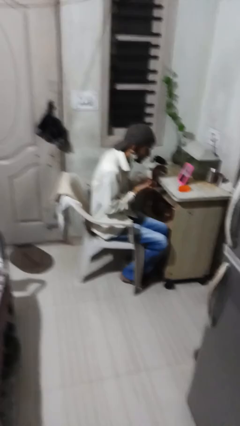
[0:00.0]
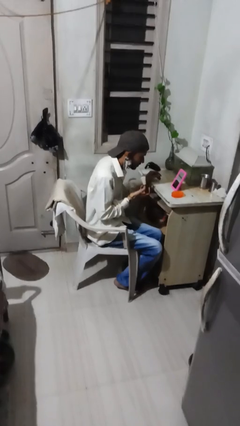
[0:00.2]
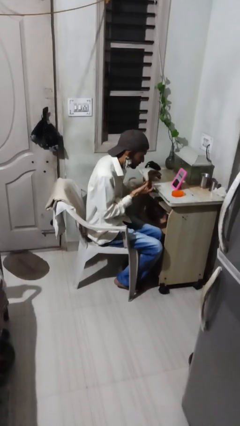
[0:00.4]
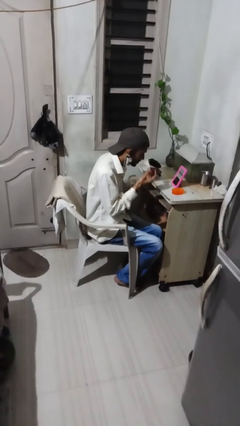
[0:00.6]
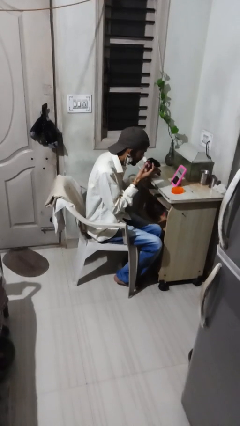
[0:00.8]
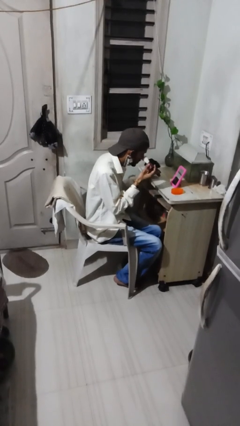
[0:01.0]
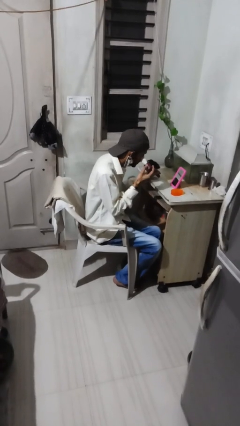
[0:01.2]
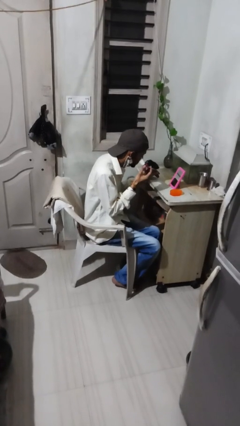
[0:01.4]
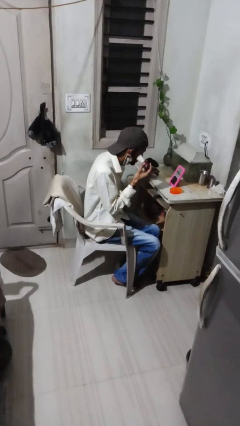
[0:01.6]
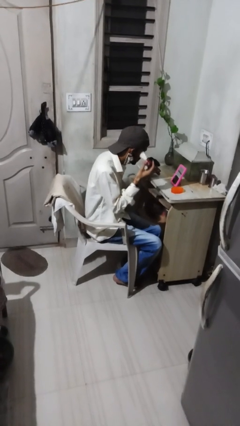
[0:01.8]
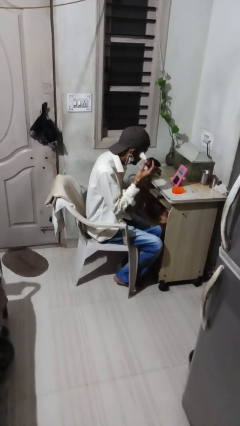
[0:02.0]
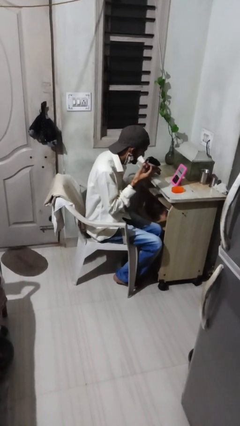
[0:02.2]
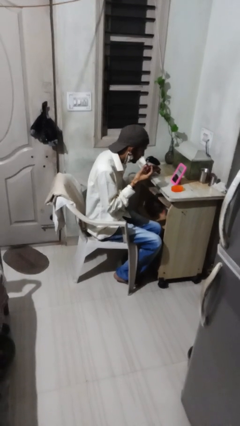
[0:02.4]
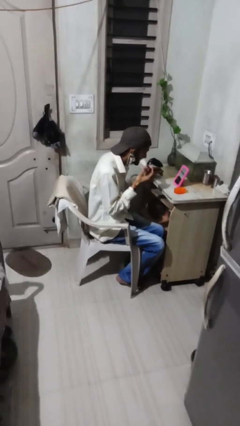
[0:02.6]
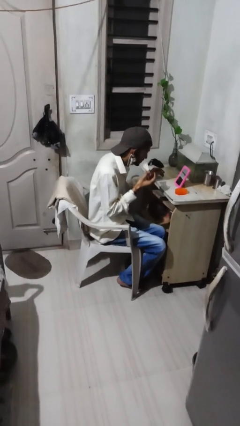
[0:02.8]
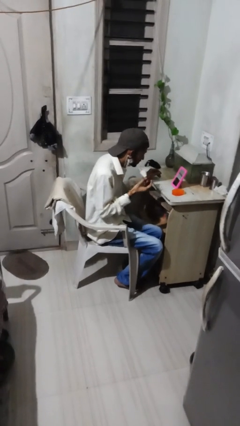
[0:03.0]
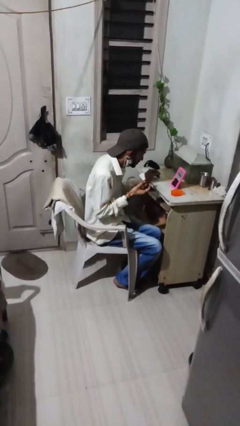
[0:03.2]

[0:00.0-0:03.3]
person applies foundation makeup

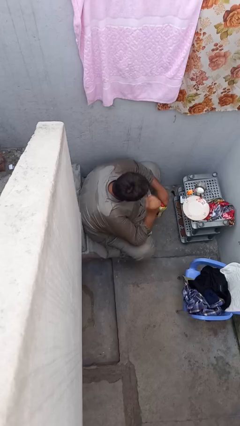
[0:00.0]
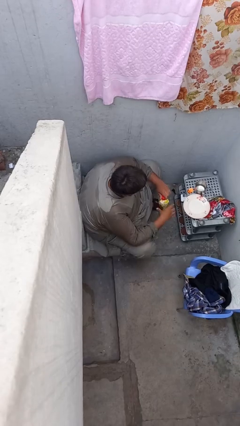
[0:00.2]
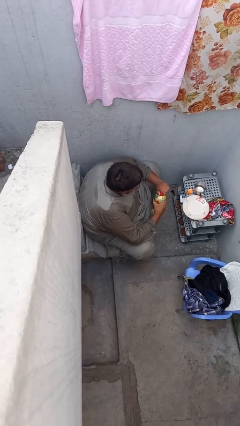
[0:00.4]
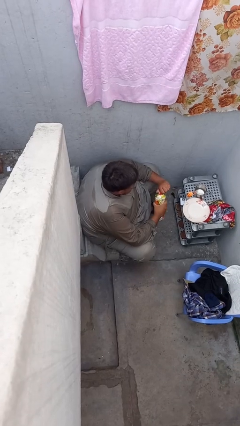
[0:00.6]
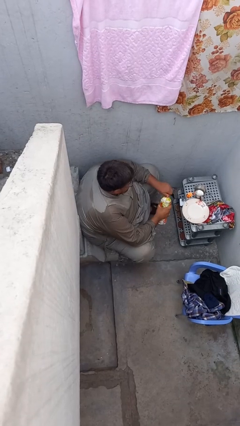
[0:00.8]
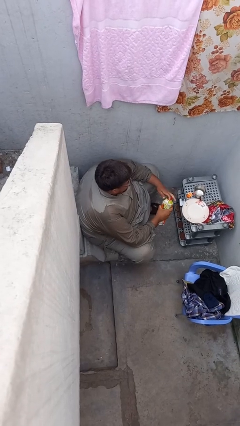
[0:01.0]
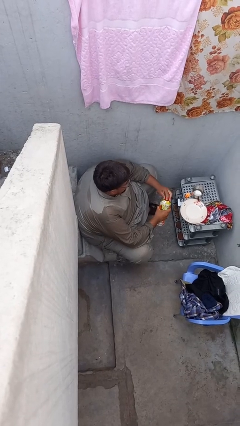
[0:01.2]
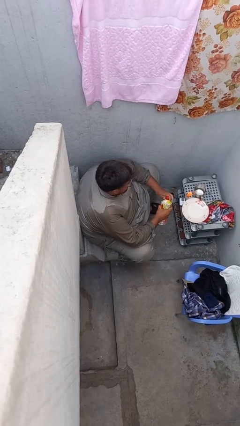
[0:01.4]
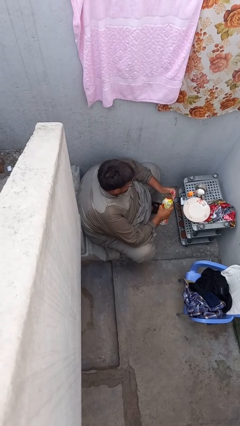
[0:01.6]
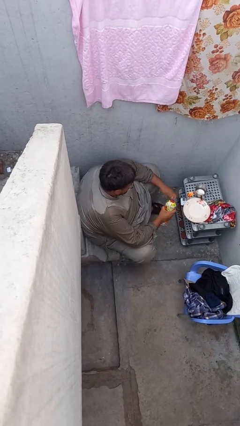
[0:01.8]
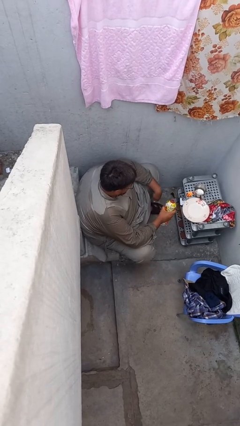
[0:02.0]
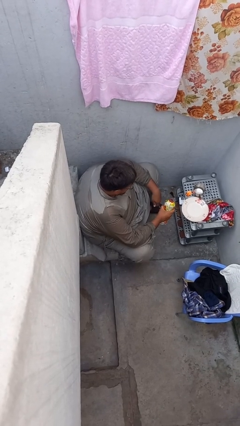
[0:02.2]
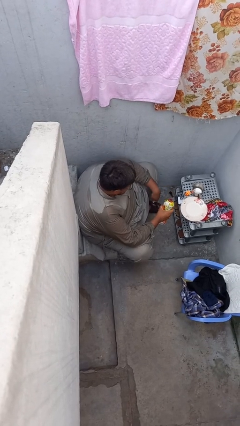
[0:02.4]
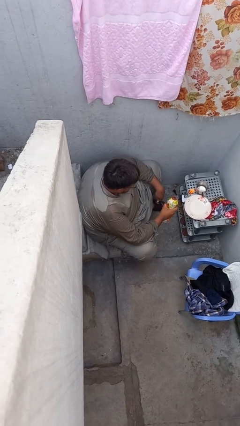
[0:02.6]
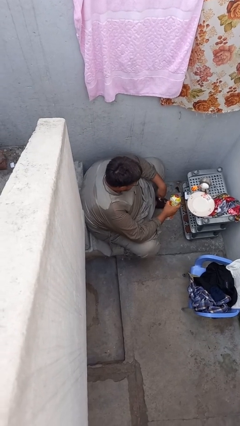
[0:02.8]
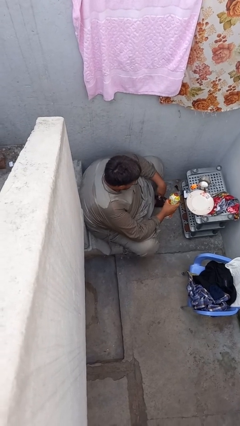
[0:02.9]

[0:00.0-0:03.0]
person unscrews lid from bottle

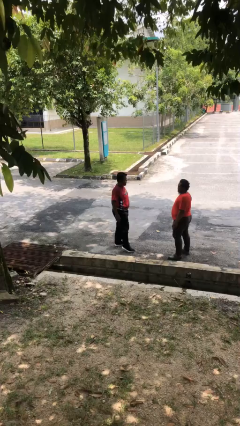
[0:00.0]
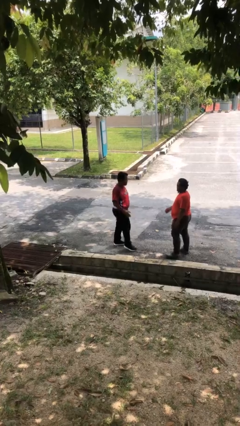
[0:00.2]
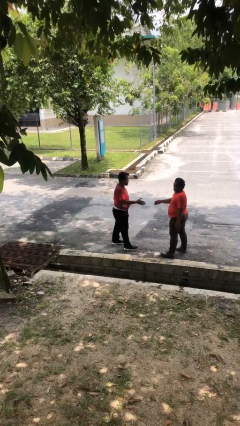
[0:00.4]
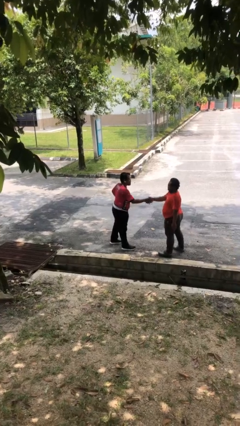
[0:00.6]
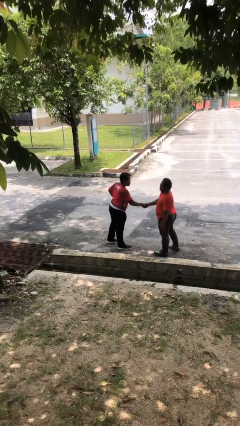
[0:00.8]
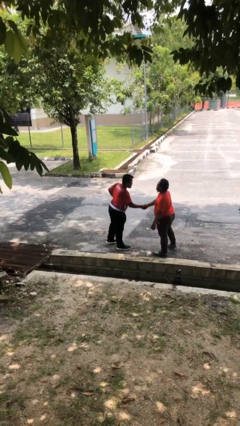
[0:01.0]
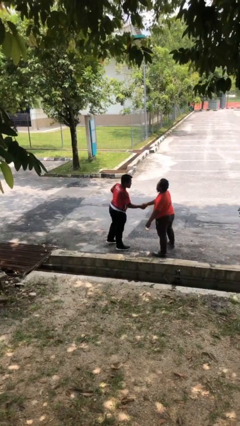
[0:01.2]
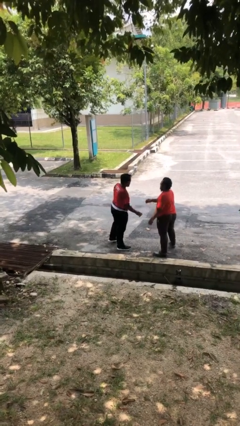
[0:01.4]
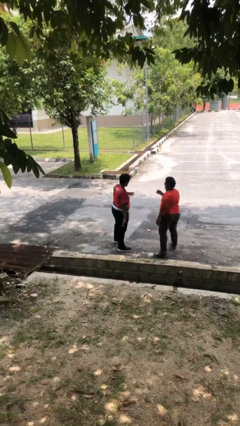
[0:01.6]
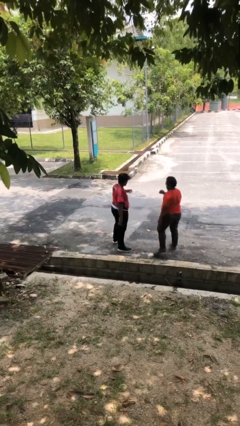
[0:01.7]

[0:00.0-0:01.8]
person shakes hand

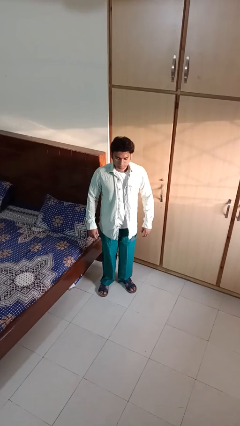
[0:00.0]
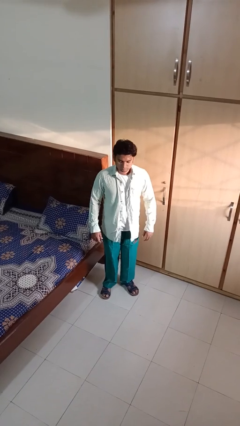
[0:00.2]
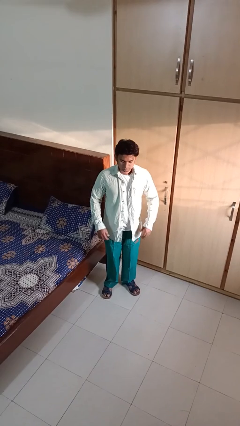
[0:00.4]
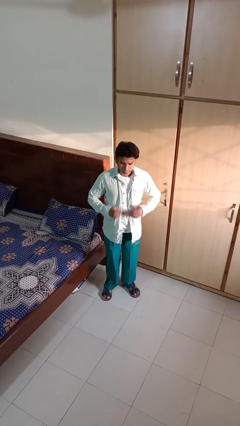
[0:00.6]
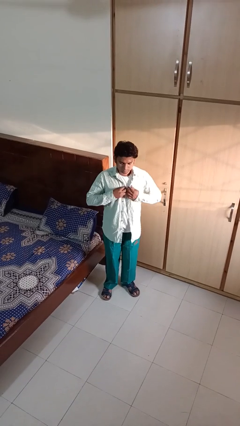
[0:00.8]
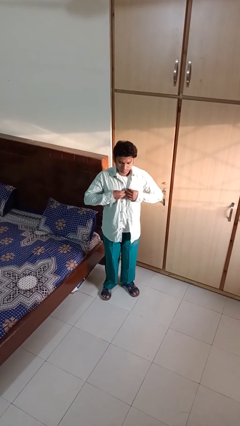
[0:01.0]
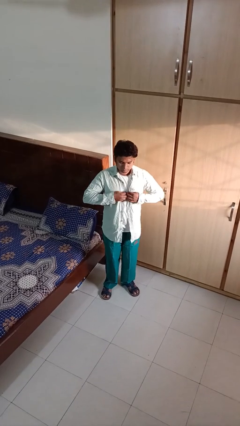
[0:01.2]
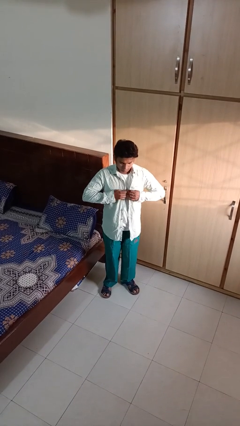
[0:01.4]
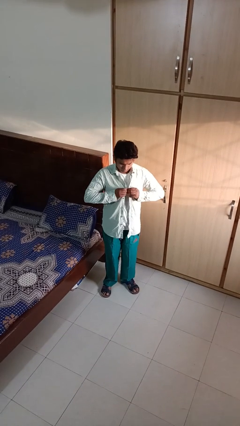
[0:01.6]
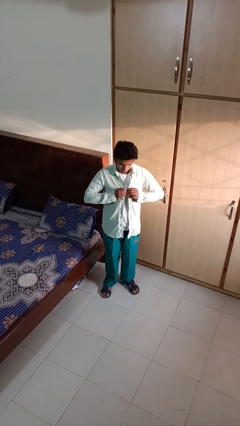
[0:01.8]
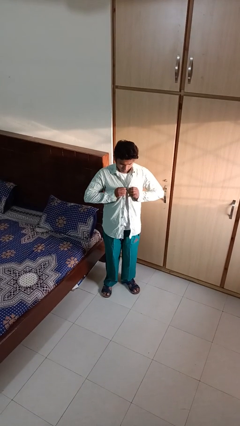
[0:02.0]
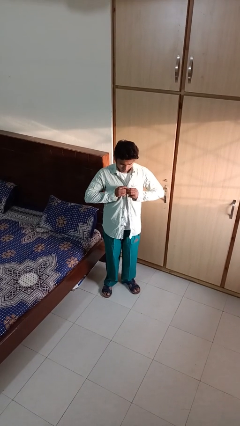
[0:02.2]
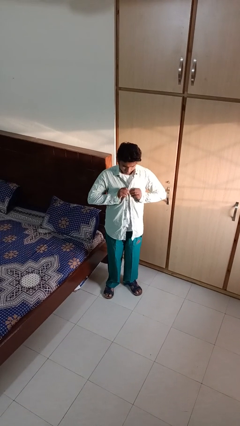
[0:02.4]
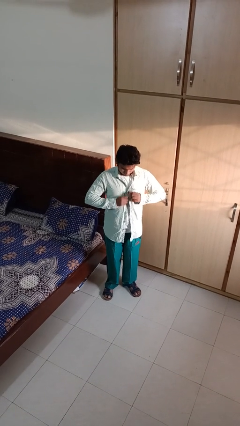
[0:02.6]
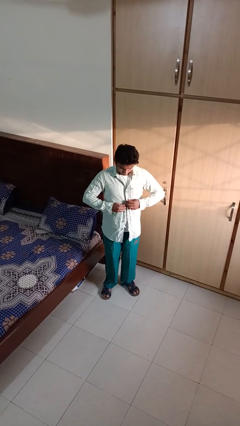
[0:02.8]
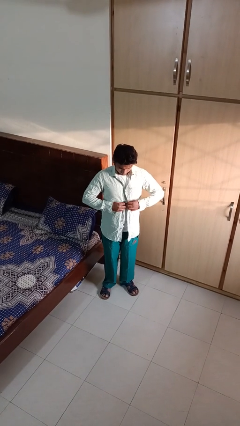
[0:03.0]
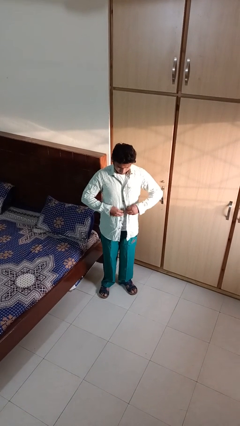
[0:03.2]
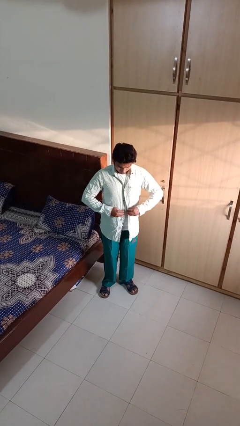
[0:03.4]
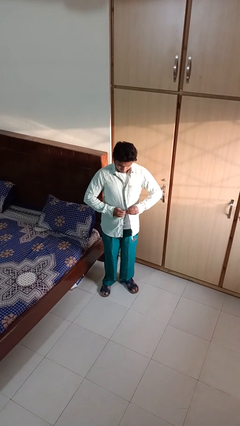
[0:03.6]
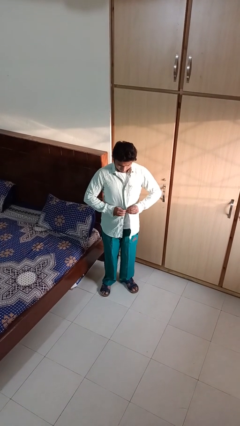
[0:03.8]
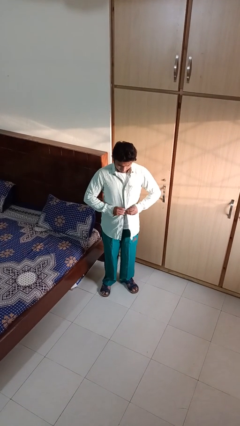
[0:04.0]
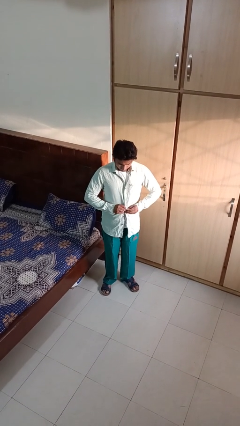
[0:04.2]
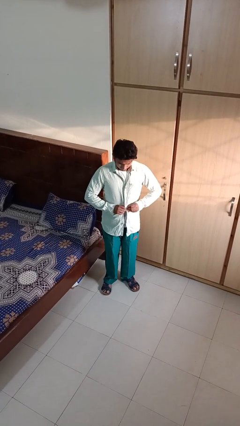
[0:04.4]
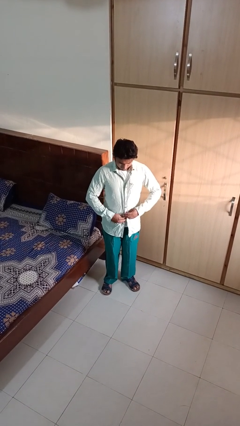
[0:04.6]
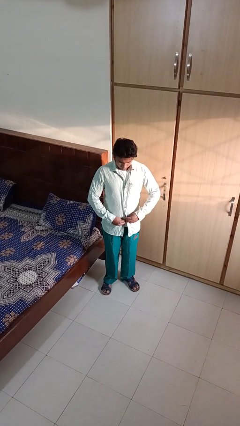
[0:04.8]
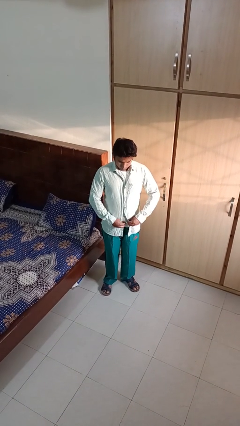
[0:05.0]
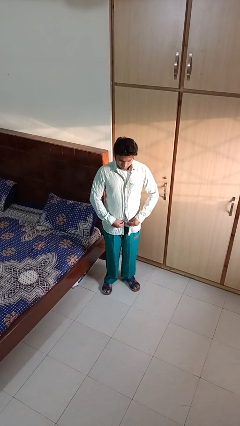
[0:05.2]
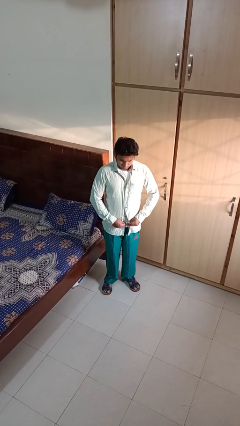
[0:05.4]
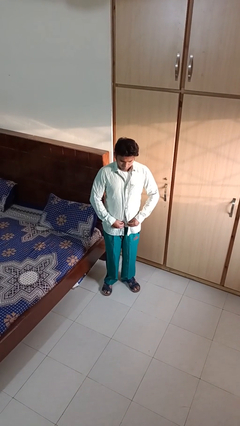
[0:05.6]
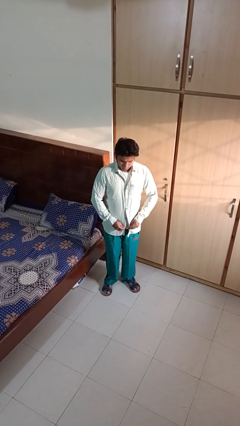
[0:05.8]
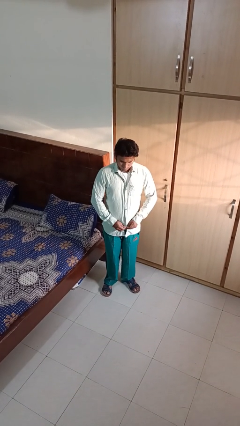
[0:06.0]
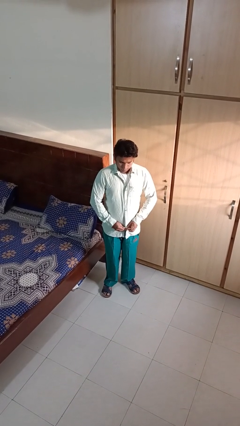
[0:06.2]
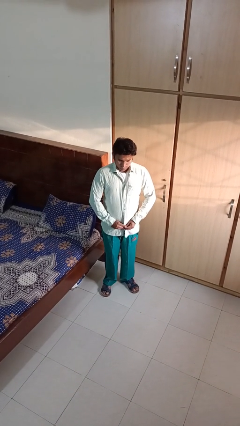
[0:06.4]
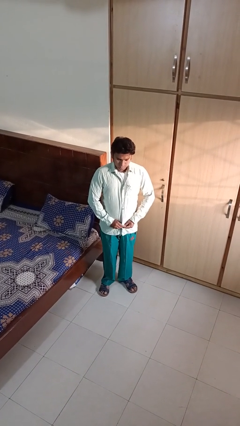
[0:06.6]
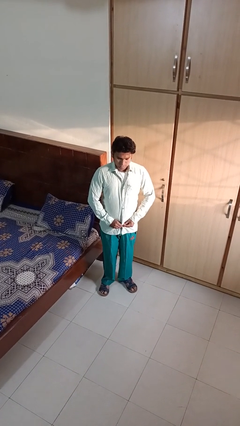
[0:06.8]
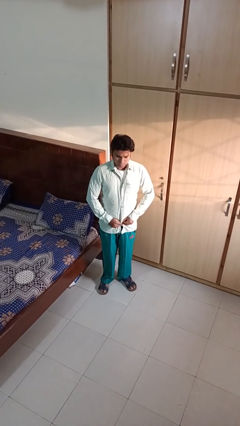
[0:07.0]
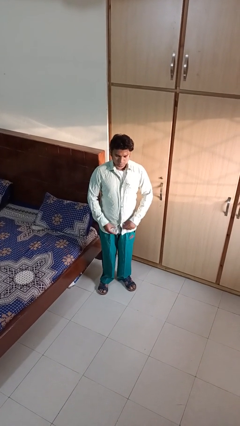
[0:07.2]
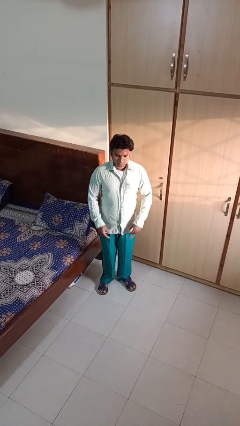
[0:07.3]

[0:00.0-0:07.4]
person buttons shirt

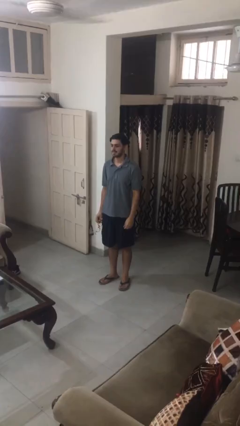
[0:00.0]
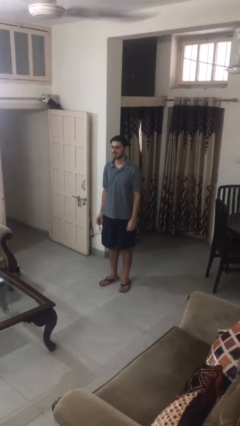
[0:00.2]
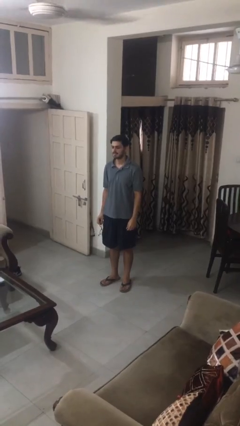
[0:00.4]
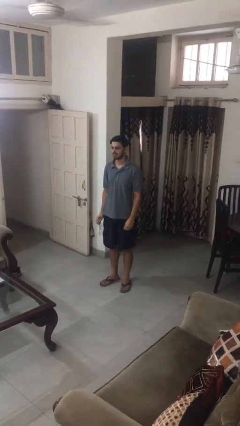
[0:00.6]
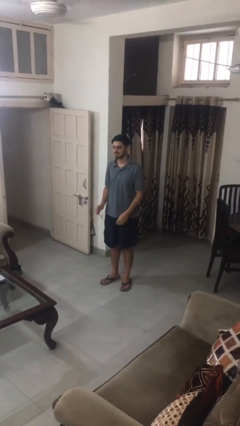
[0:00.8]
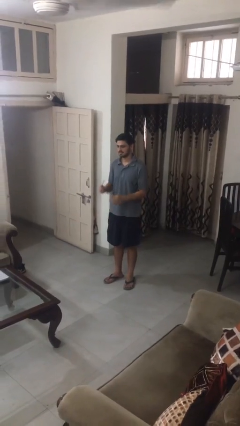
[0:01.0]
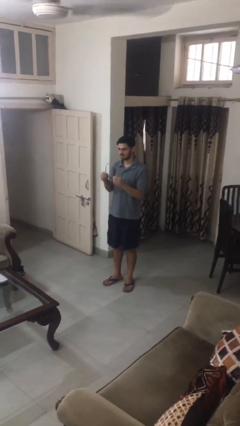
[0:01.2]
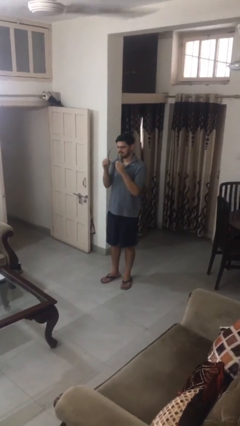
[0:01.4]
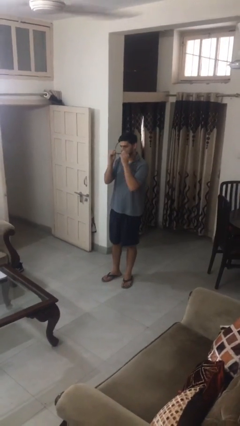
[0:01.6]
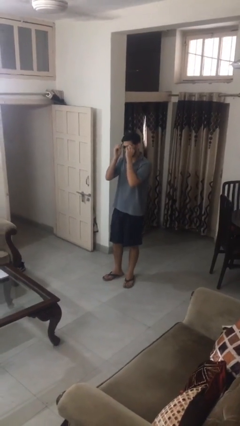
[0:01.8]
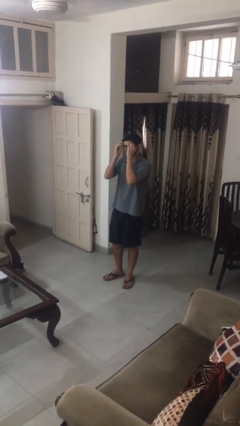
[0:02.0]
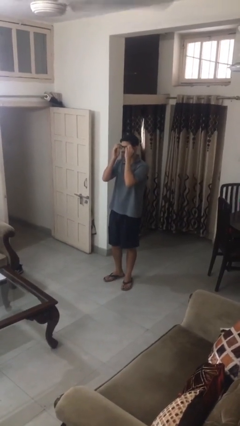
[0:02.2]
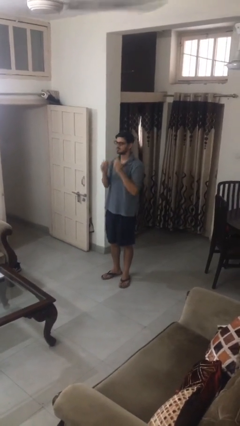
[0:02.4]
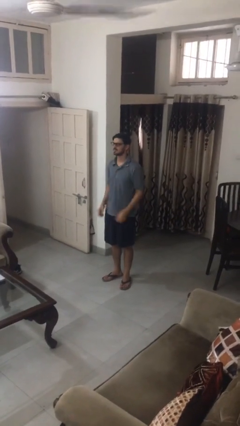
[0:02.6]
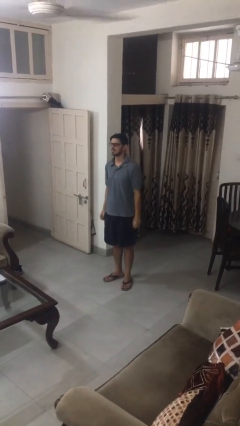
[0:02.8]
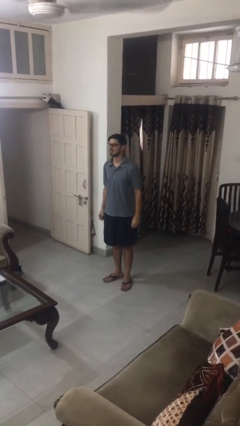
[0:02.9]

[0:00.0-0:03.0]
person puts on glasses
